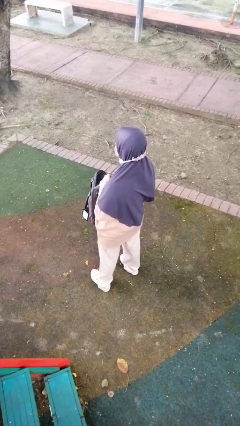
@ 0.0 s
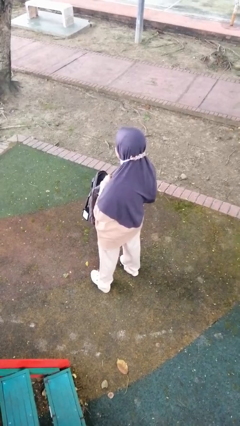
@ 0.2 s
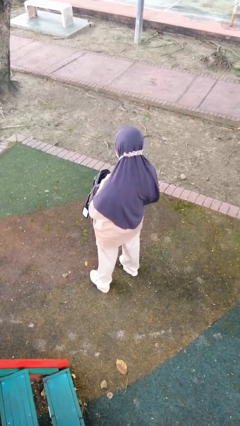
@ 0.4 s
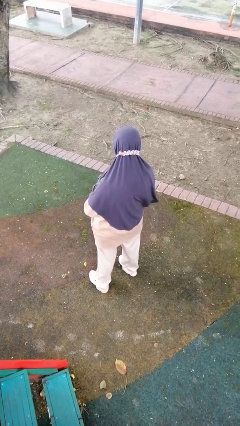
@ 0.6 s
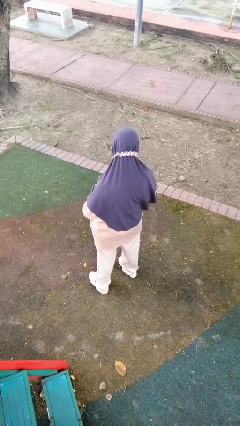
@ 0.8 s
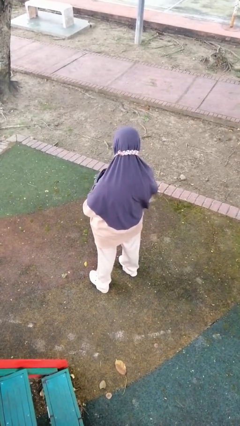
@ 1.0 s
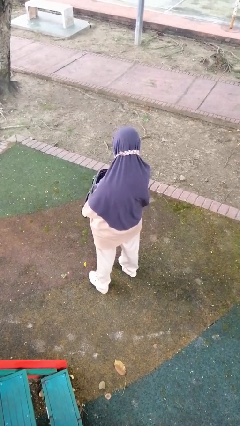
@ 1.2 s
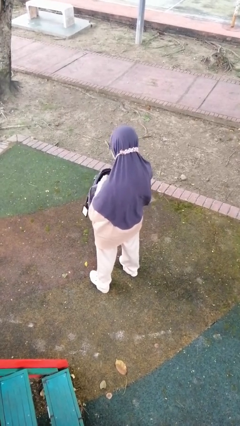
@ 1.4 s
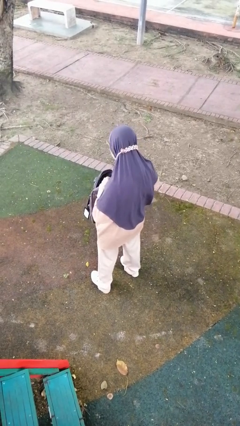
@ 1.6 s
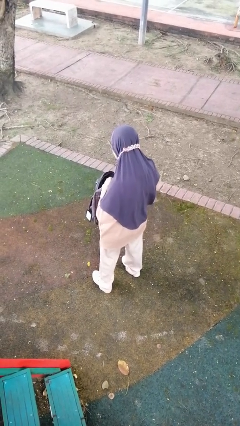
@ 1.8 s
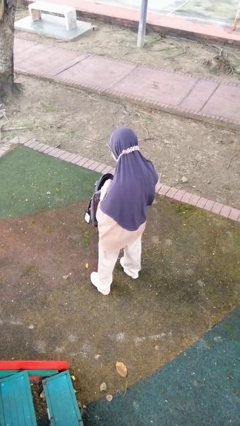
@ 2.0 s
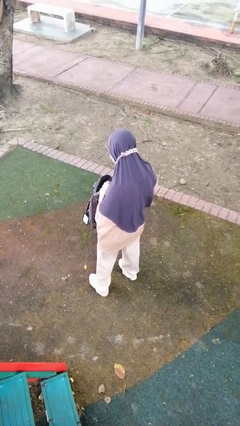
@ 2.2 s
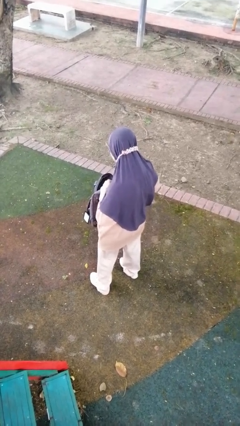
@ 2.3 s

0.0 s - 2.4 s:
person searches in backpack

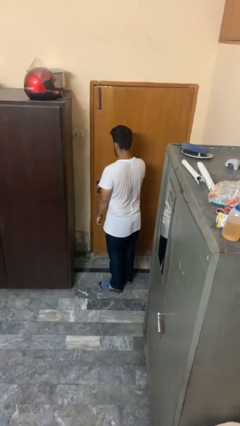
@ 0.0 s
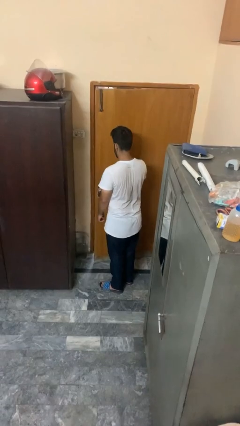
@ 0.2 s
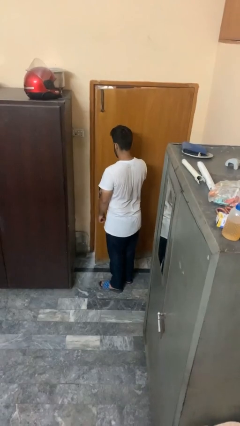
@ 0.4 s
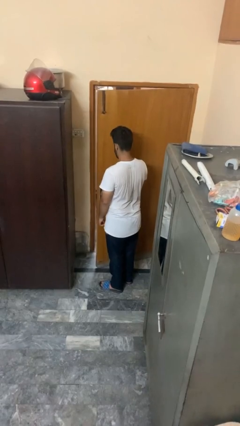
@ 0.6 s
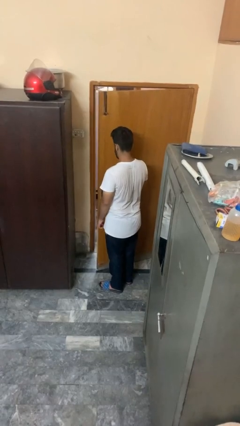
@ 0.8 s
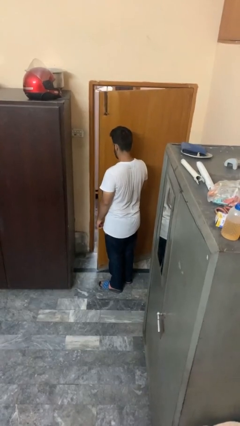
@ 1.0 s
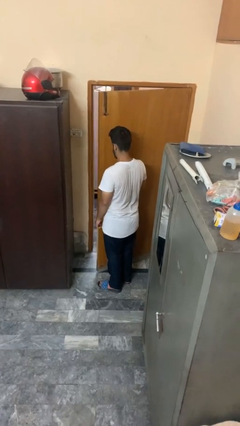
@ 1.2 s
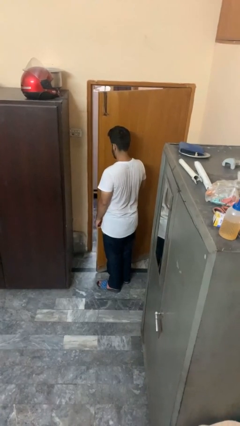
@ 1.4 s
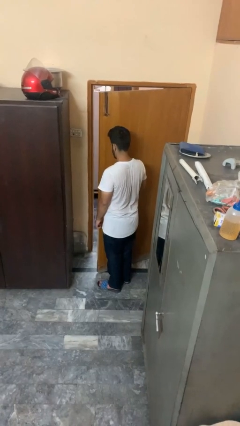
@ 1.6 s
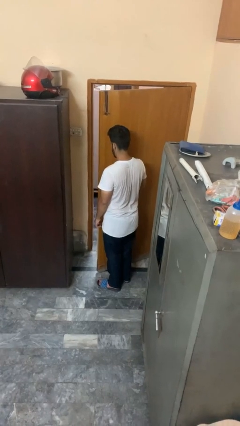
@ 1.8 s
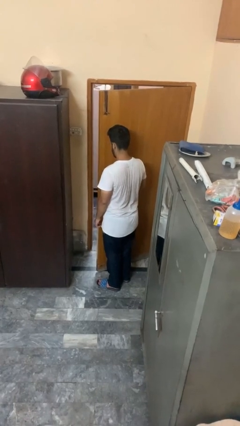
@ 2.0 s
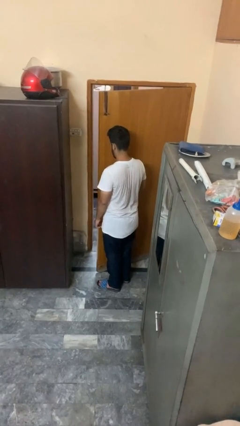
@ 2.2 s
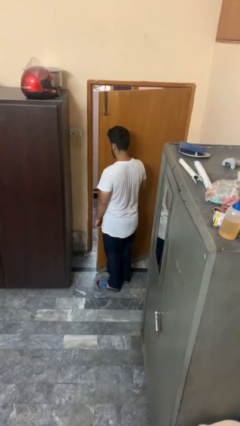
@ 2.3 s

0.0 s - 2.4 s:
person opens facility door

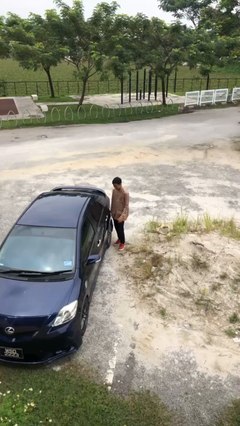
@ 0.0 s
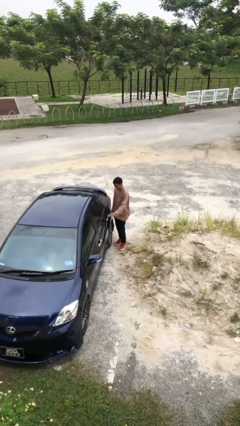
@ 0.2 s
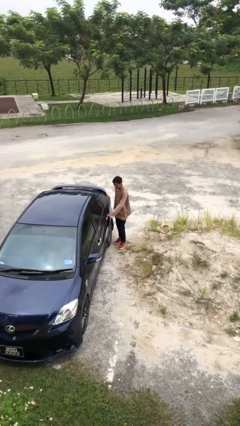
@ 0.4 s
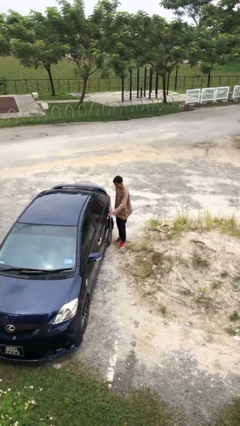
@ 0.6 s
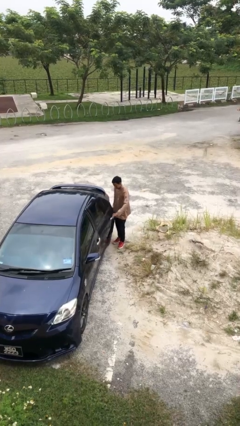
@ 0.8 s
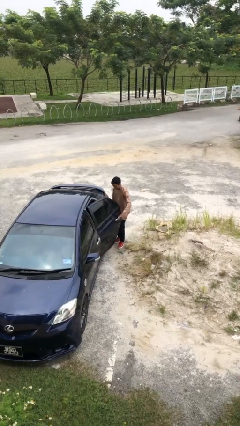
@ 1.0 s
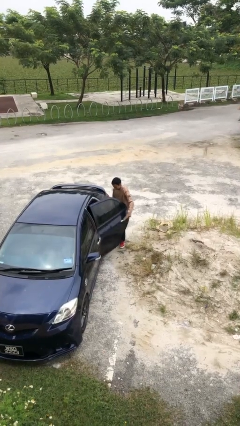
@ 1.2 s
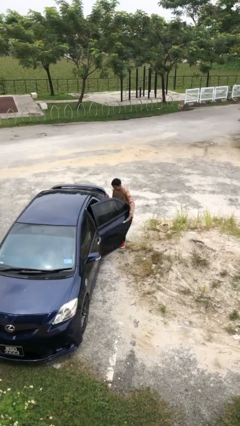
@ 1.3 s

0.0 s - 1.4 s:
person opens car door

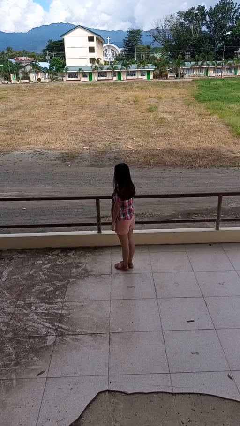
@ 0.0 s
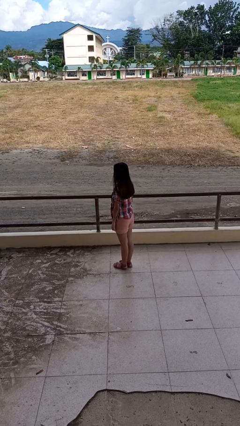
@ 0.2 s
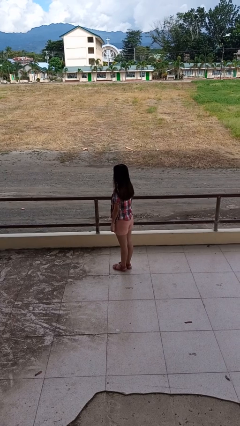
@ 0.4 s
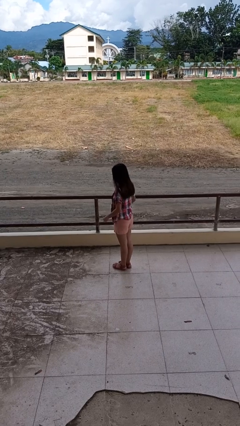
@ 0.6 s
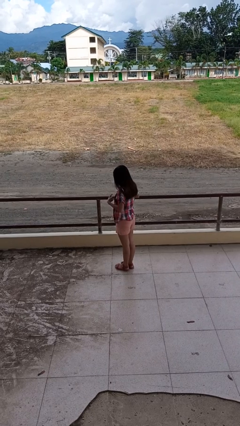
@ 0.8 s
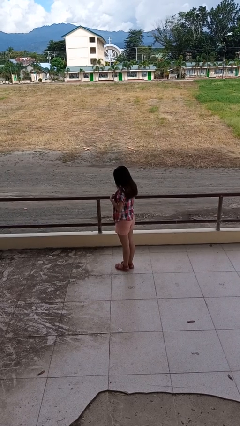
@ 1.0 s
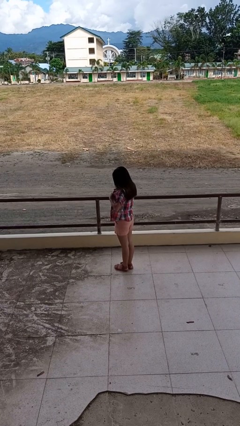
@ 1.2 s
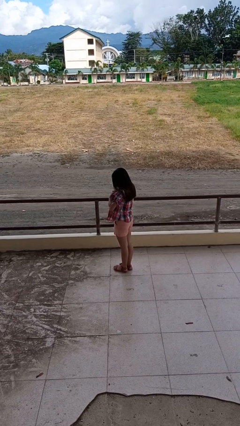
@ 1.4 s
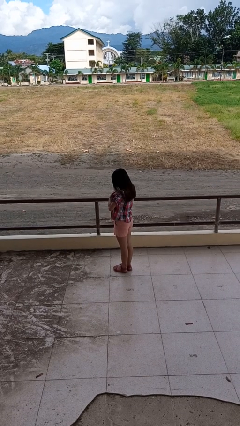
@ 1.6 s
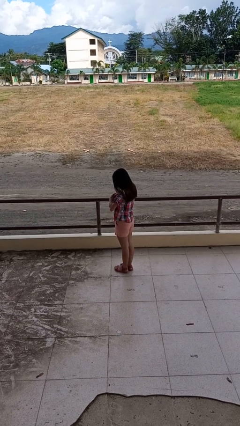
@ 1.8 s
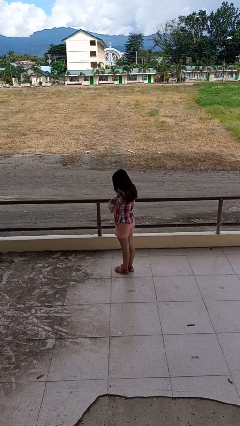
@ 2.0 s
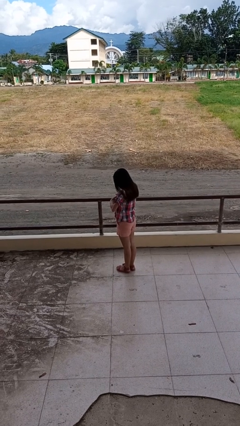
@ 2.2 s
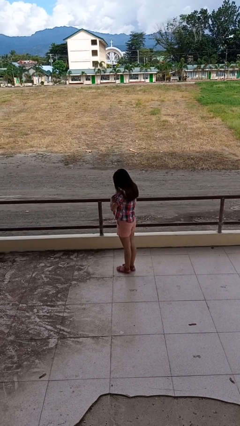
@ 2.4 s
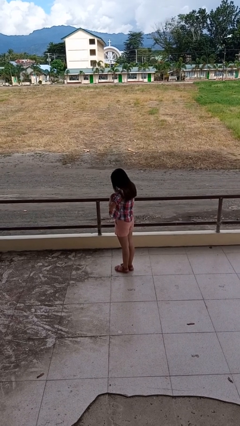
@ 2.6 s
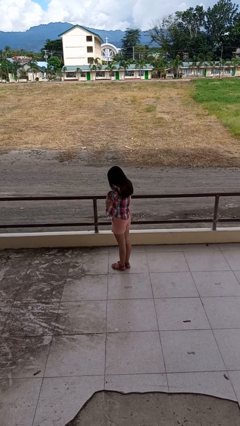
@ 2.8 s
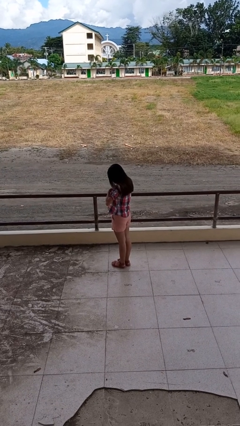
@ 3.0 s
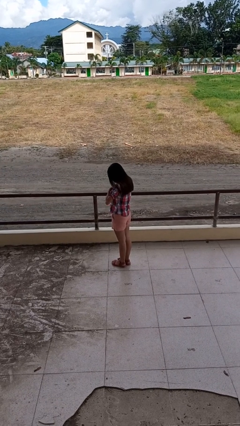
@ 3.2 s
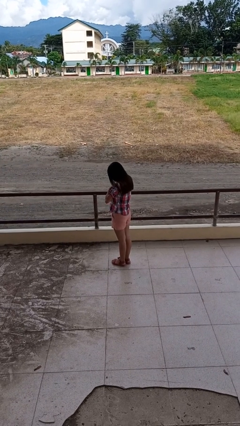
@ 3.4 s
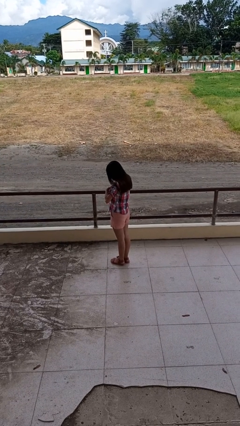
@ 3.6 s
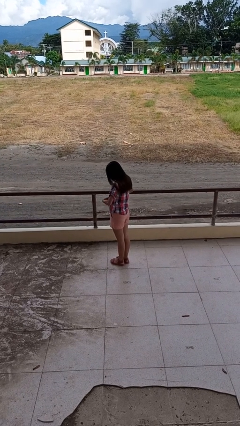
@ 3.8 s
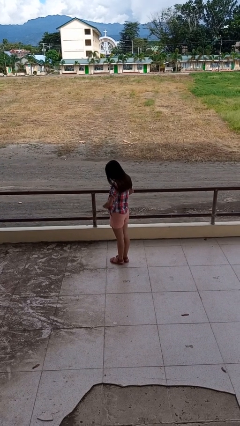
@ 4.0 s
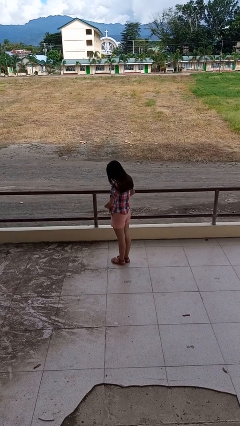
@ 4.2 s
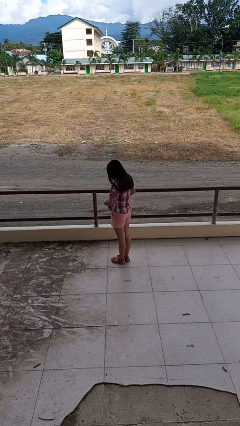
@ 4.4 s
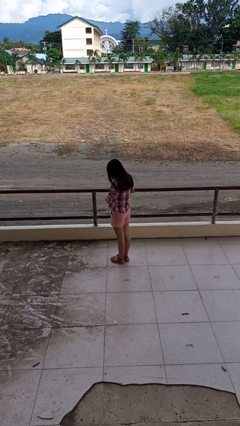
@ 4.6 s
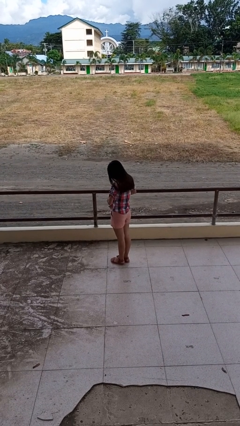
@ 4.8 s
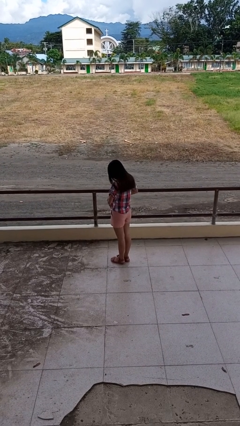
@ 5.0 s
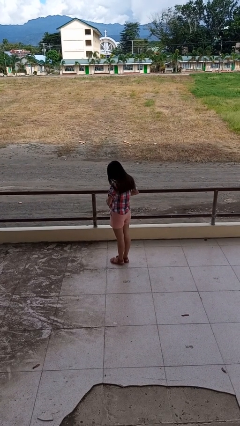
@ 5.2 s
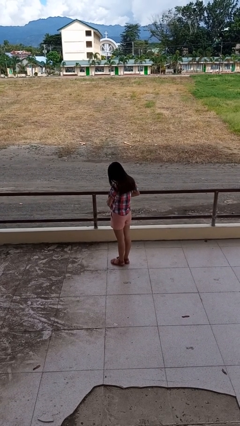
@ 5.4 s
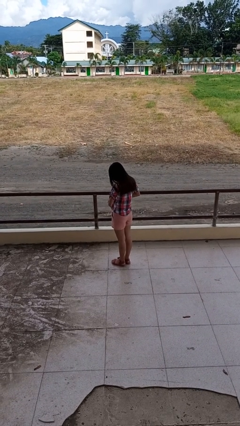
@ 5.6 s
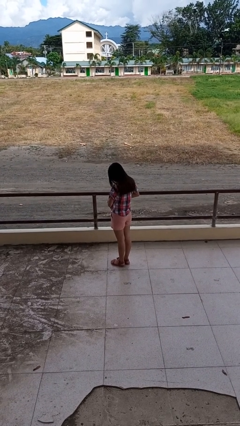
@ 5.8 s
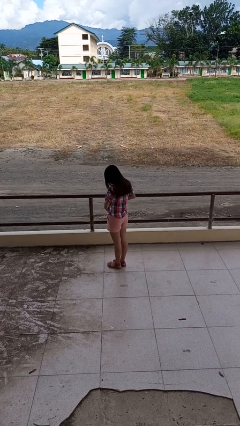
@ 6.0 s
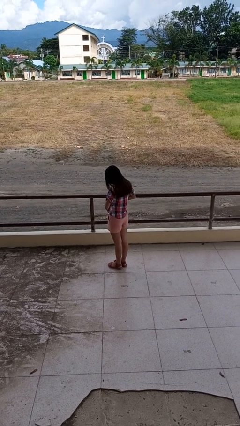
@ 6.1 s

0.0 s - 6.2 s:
person buttons shirt

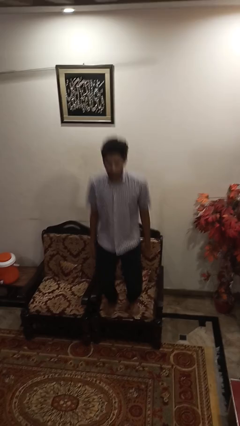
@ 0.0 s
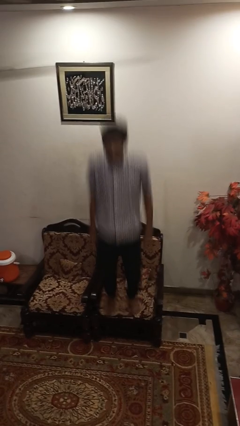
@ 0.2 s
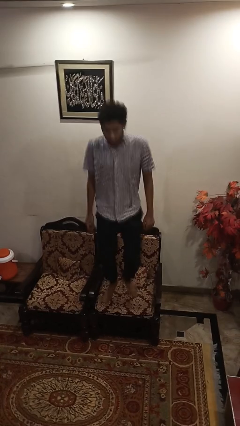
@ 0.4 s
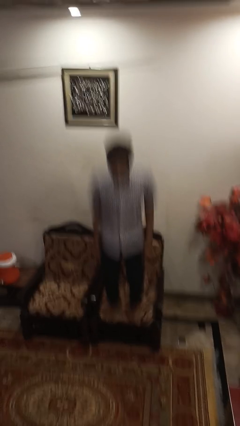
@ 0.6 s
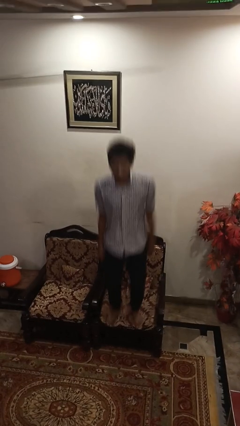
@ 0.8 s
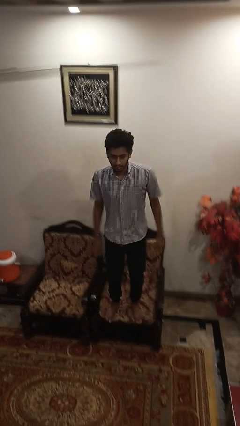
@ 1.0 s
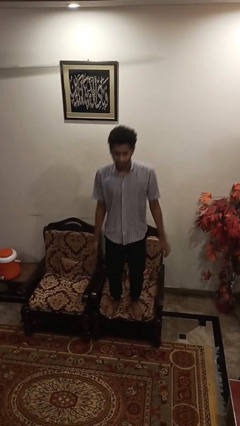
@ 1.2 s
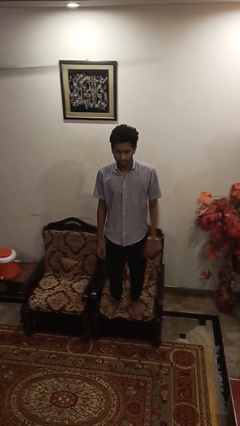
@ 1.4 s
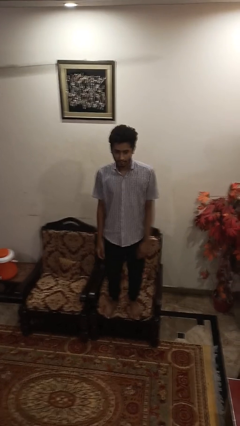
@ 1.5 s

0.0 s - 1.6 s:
person jumps on couch

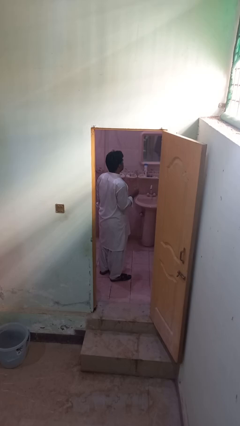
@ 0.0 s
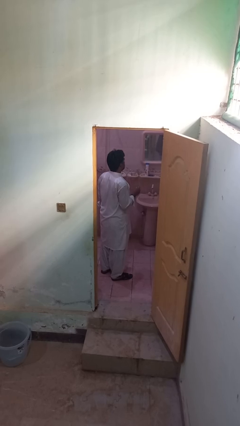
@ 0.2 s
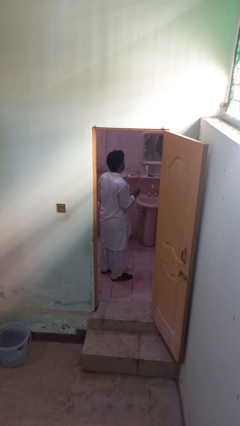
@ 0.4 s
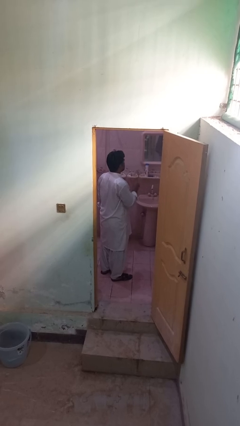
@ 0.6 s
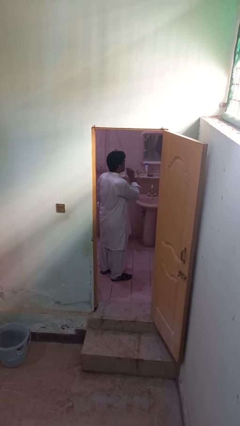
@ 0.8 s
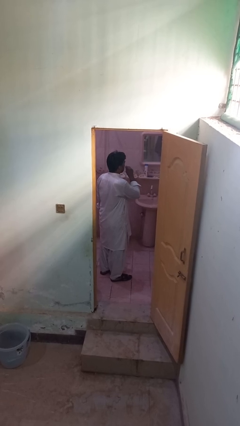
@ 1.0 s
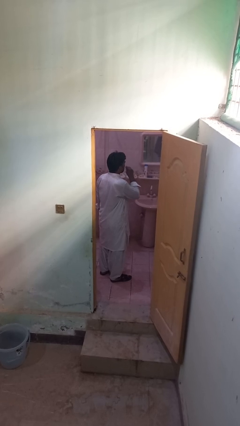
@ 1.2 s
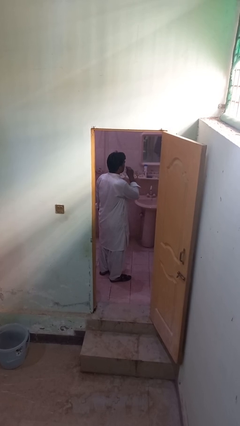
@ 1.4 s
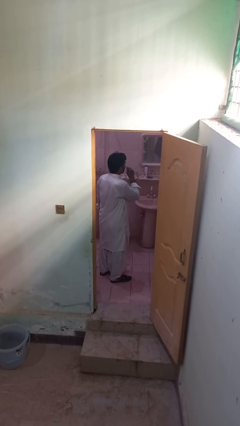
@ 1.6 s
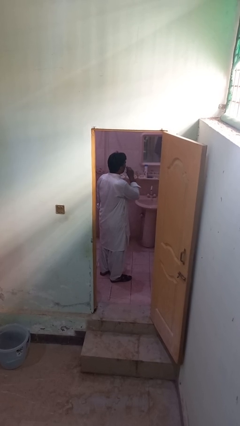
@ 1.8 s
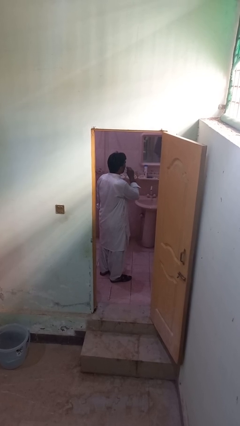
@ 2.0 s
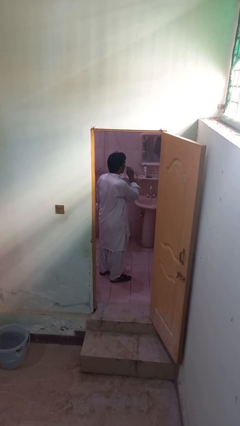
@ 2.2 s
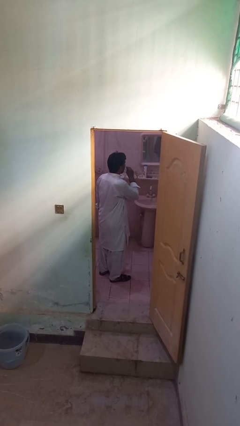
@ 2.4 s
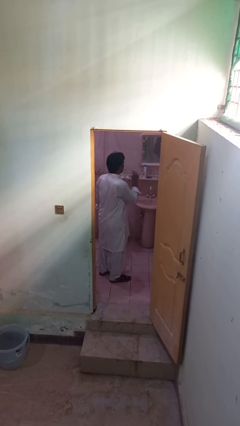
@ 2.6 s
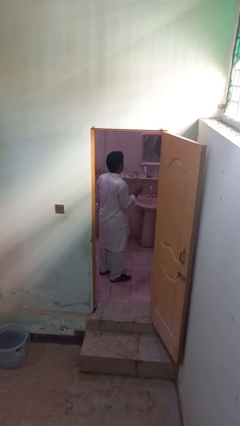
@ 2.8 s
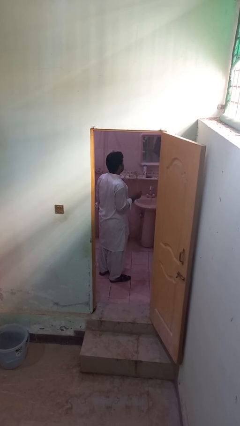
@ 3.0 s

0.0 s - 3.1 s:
person flosses

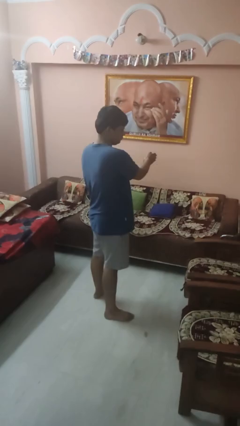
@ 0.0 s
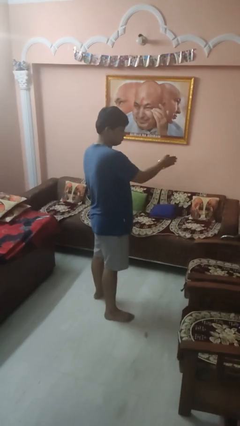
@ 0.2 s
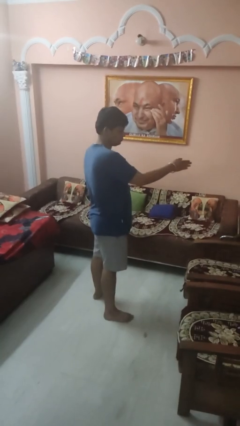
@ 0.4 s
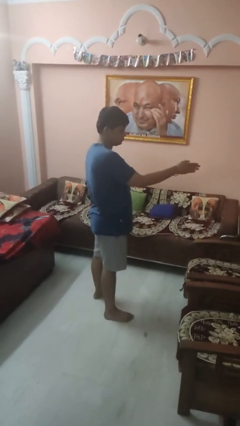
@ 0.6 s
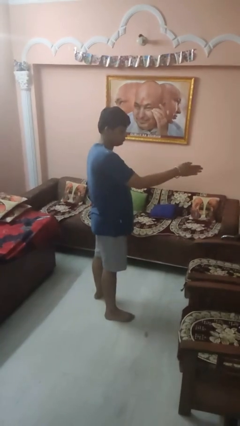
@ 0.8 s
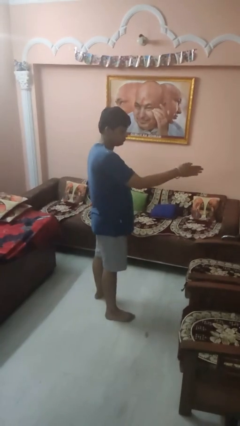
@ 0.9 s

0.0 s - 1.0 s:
person gestures swipe right
